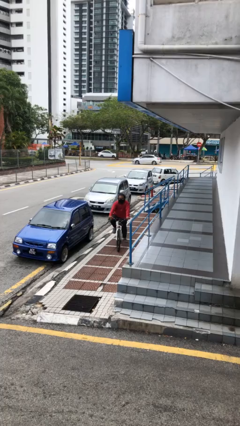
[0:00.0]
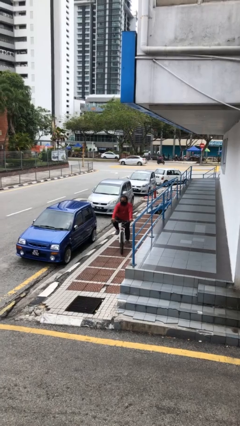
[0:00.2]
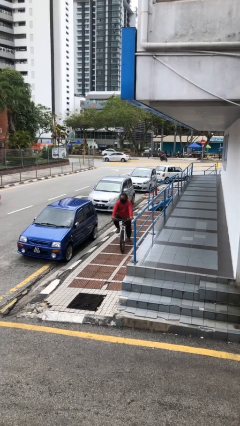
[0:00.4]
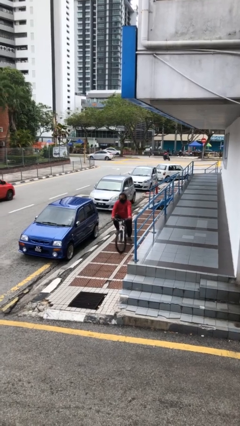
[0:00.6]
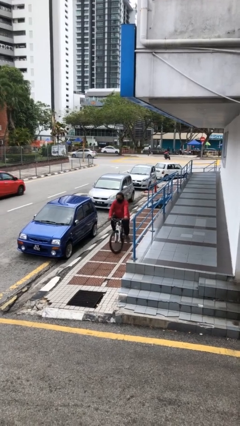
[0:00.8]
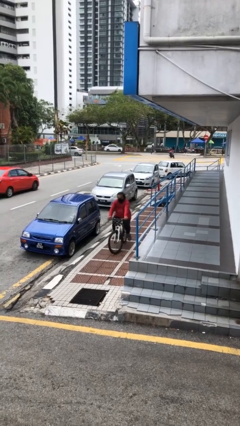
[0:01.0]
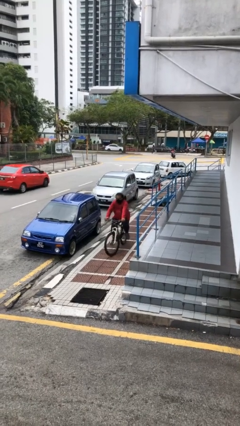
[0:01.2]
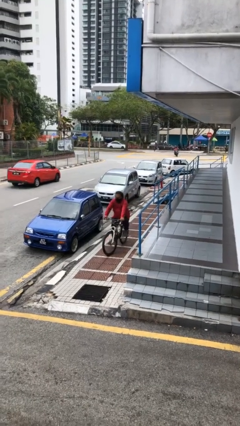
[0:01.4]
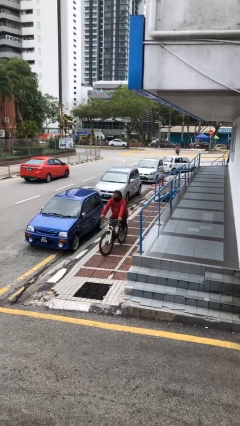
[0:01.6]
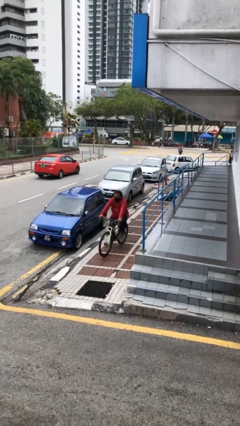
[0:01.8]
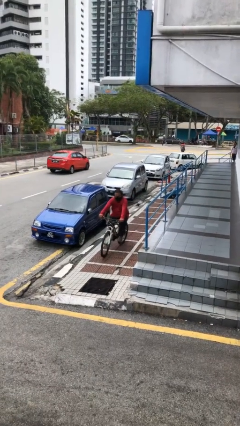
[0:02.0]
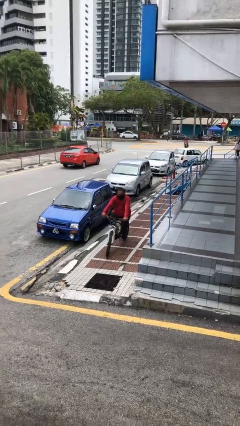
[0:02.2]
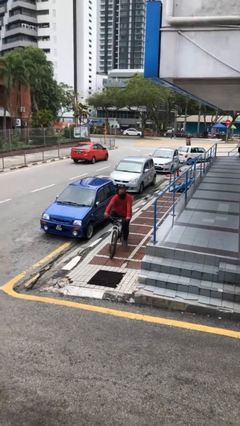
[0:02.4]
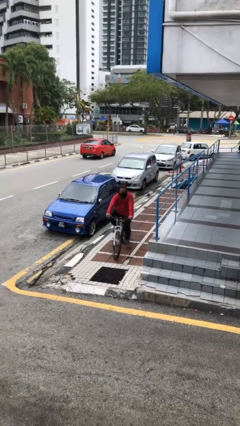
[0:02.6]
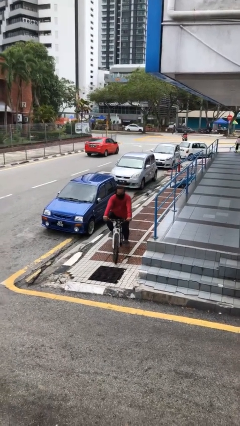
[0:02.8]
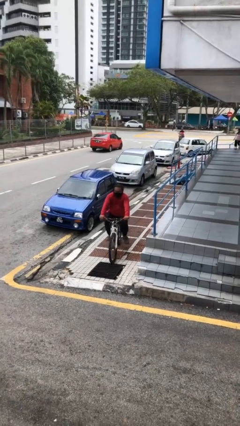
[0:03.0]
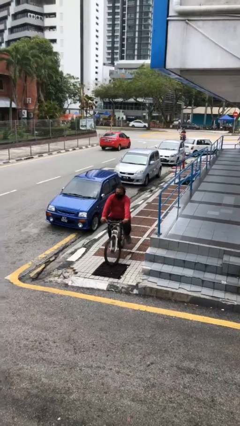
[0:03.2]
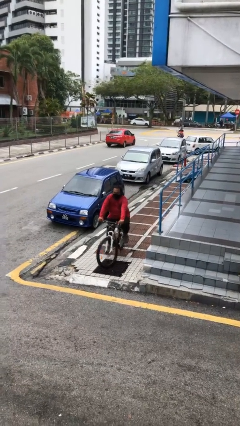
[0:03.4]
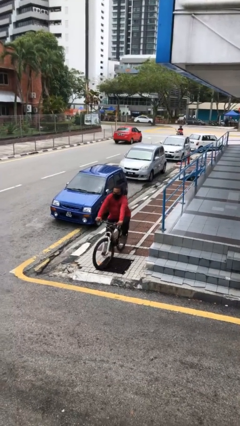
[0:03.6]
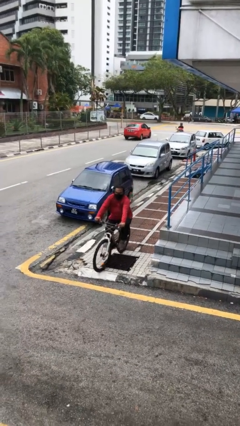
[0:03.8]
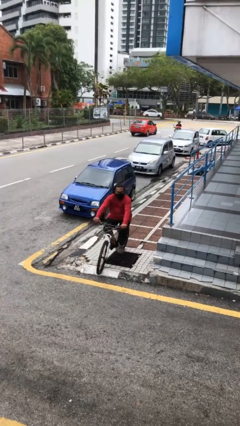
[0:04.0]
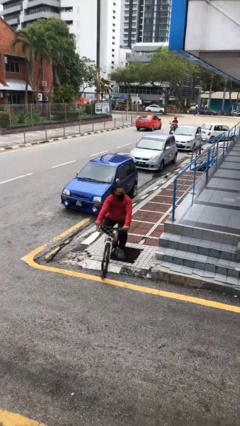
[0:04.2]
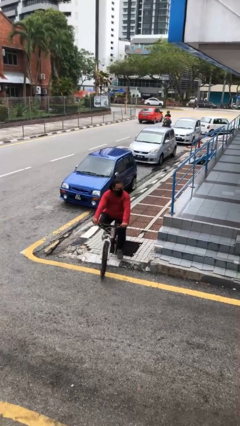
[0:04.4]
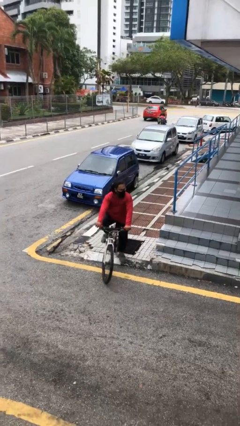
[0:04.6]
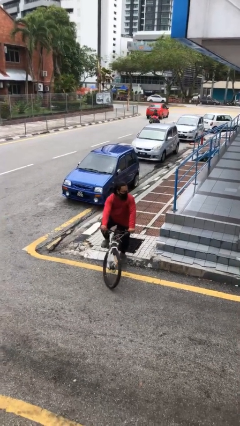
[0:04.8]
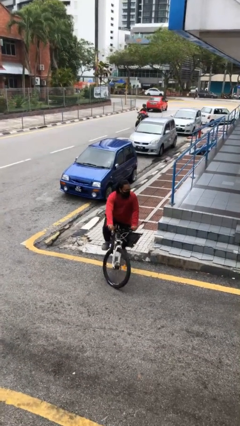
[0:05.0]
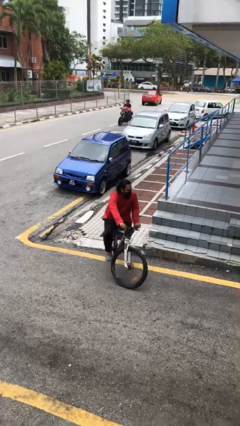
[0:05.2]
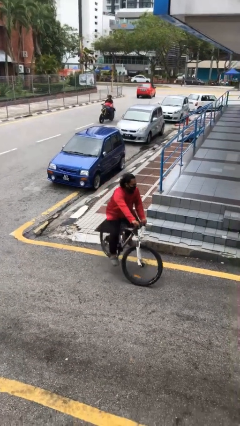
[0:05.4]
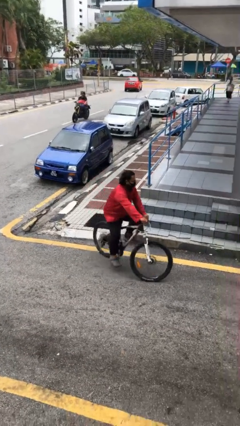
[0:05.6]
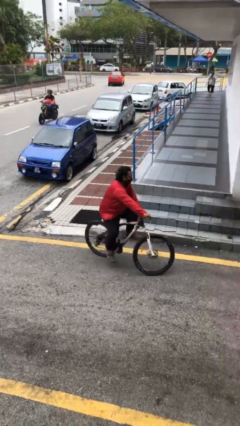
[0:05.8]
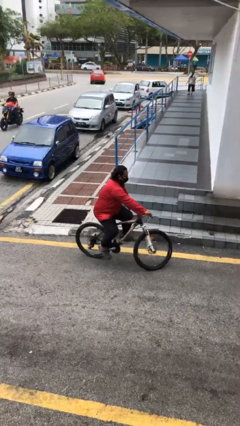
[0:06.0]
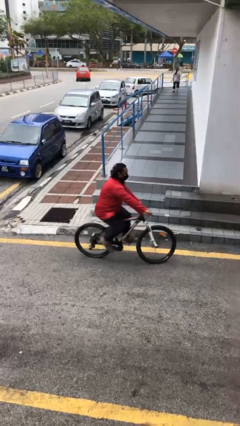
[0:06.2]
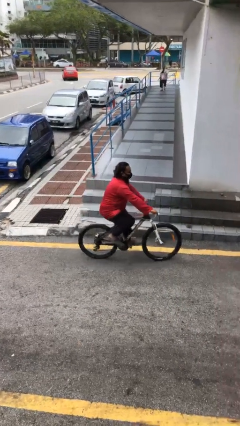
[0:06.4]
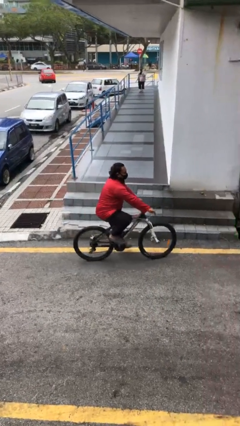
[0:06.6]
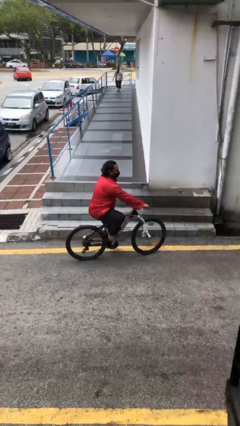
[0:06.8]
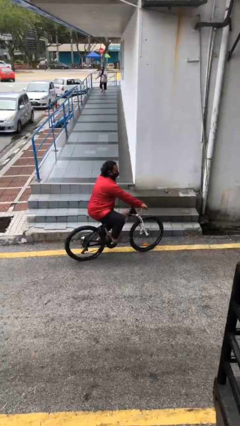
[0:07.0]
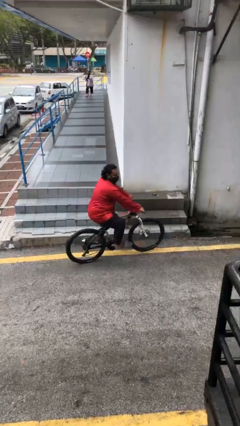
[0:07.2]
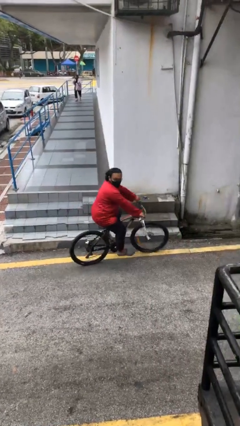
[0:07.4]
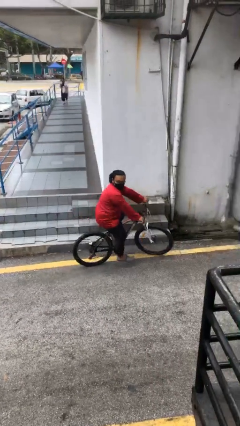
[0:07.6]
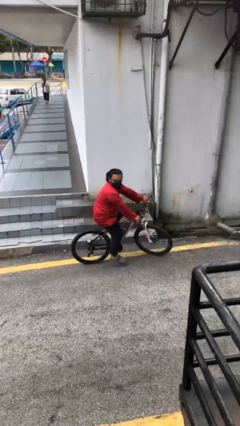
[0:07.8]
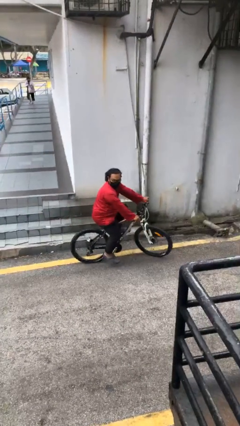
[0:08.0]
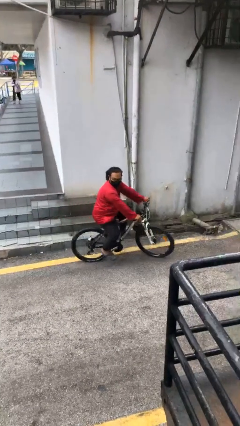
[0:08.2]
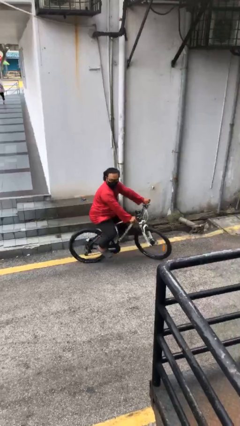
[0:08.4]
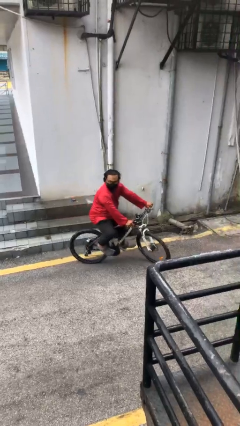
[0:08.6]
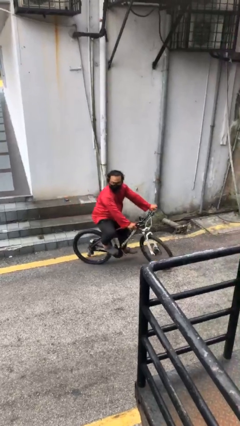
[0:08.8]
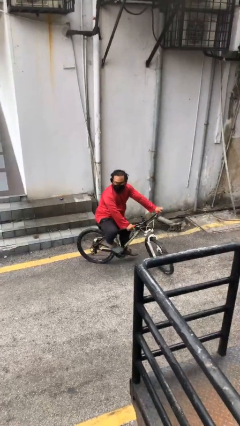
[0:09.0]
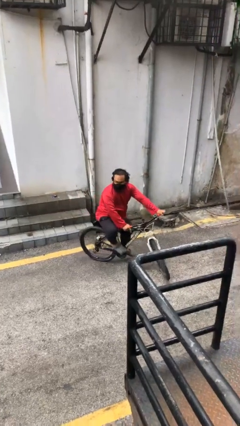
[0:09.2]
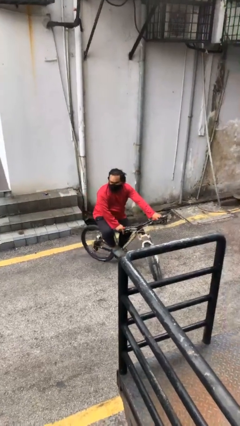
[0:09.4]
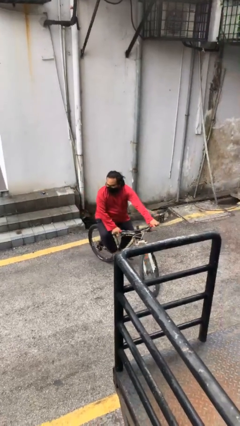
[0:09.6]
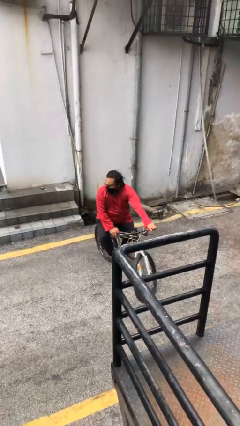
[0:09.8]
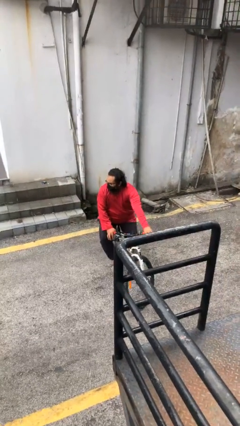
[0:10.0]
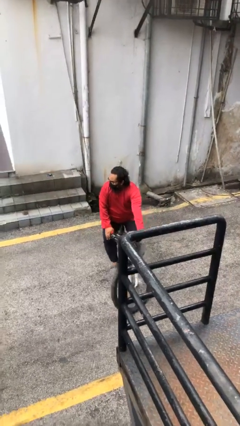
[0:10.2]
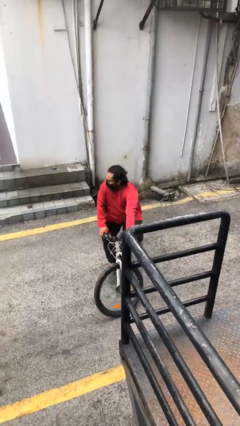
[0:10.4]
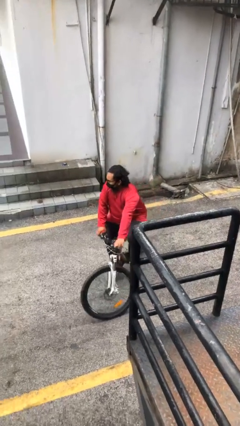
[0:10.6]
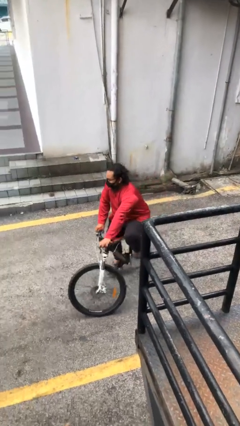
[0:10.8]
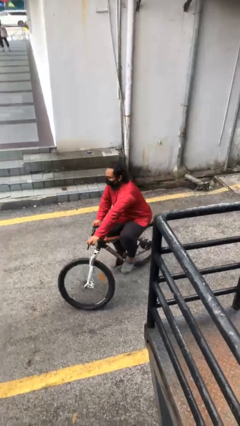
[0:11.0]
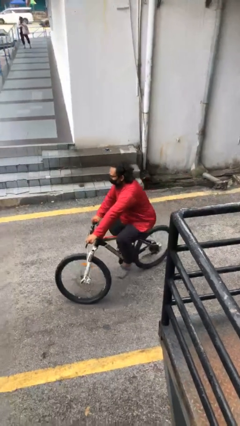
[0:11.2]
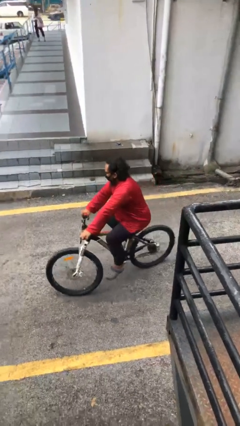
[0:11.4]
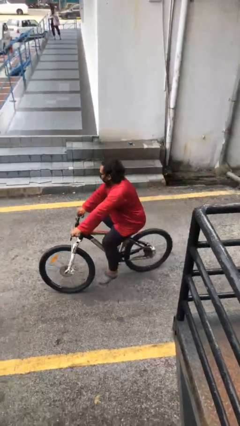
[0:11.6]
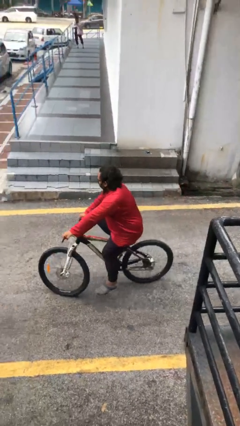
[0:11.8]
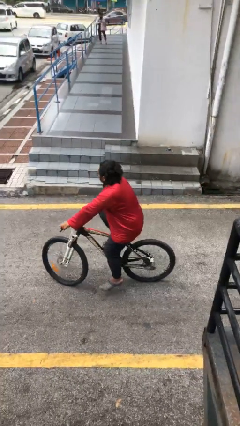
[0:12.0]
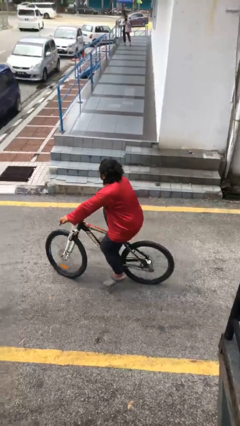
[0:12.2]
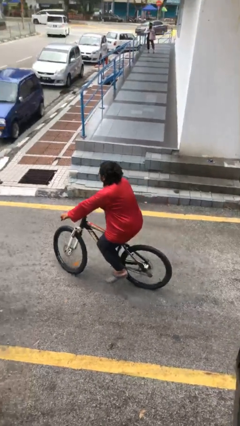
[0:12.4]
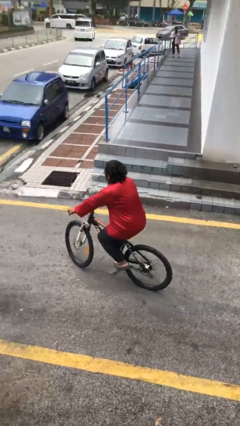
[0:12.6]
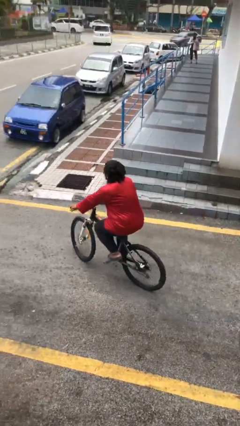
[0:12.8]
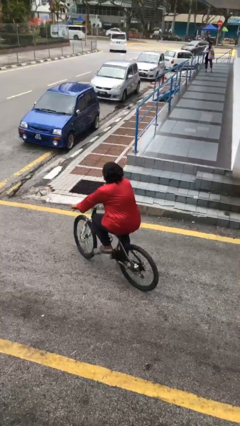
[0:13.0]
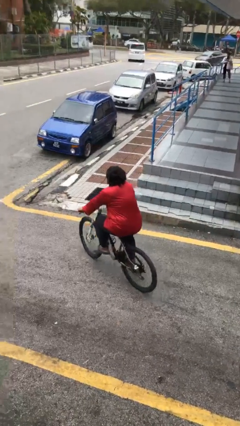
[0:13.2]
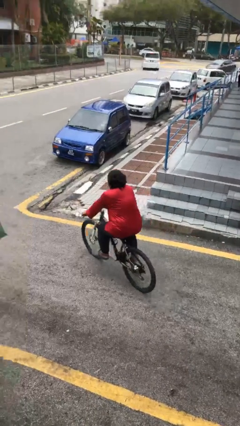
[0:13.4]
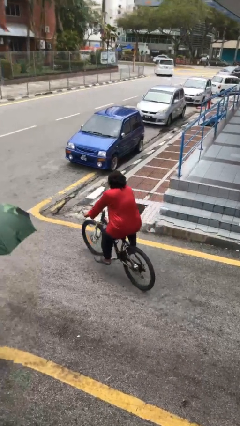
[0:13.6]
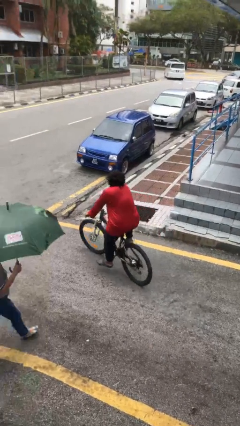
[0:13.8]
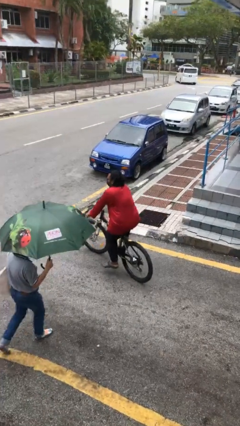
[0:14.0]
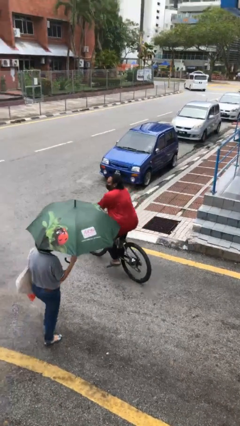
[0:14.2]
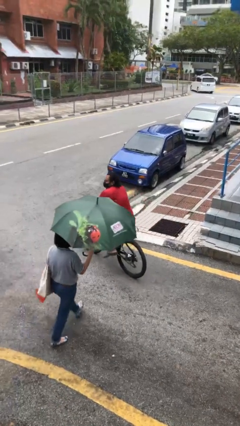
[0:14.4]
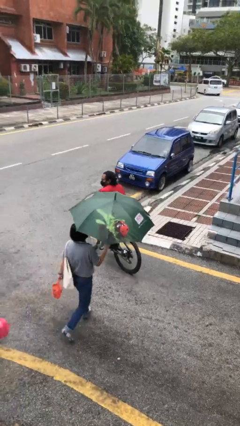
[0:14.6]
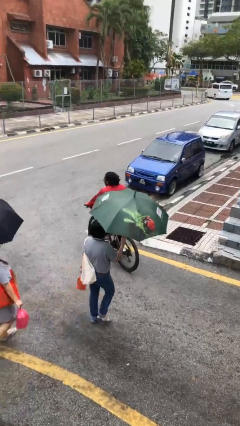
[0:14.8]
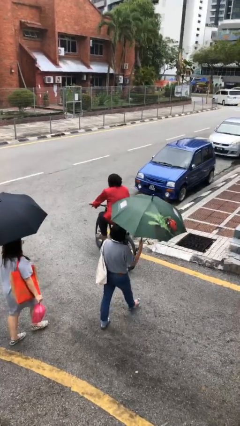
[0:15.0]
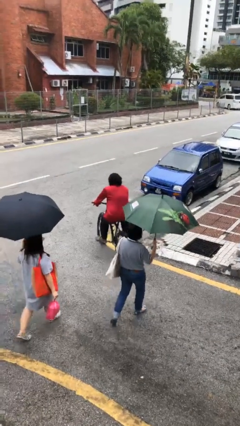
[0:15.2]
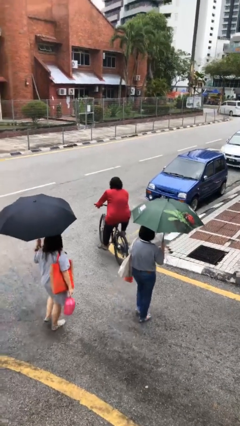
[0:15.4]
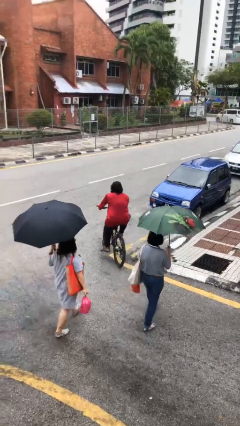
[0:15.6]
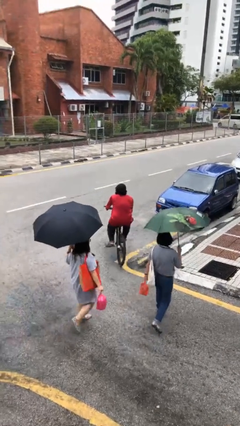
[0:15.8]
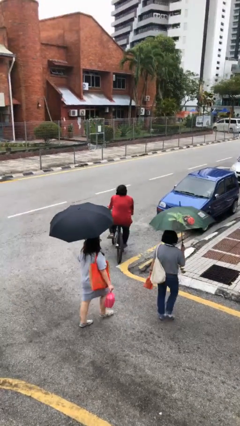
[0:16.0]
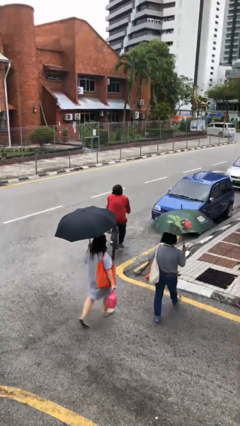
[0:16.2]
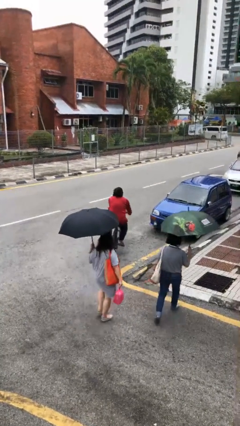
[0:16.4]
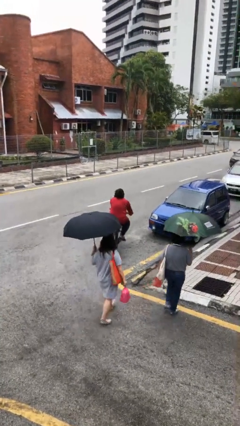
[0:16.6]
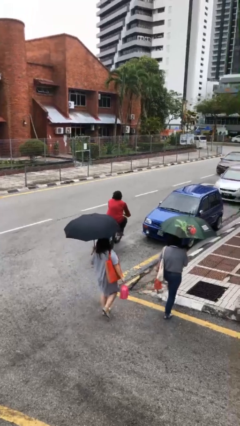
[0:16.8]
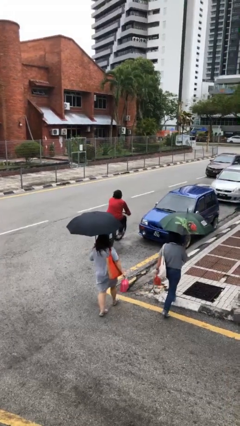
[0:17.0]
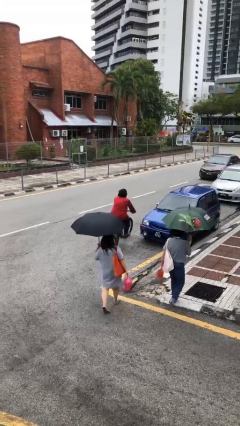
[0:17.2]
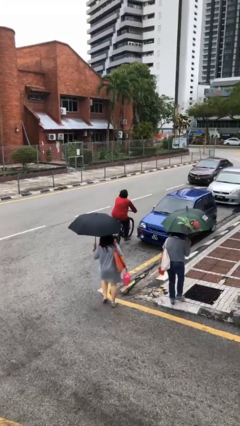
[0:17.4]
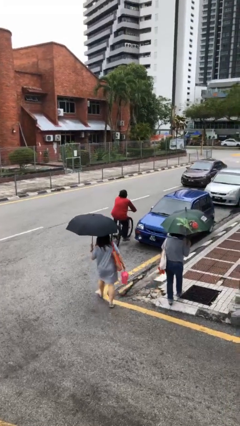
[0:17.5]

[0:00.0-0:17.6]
person rides bicycle

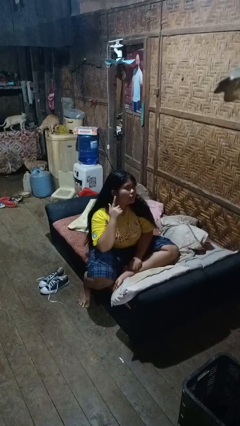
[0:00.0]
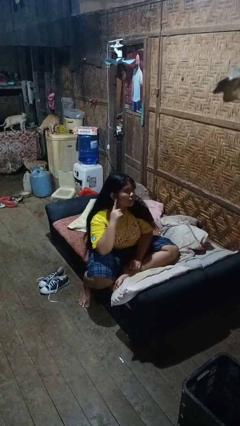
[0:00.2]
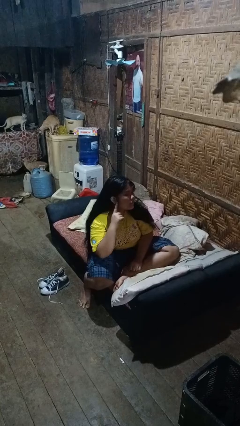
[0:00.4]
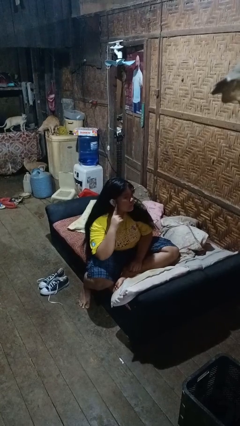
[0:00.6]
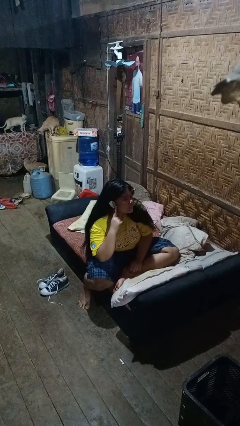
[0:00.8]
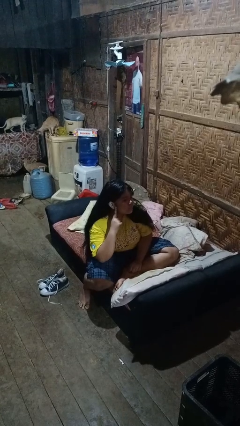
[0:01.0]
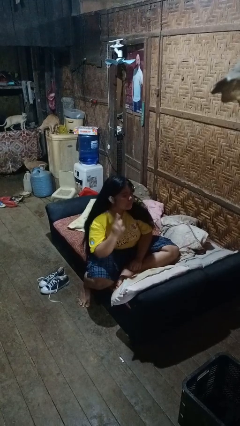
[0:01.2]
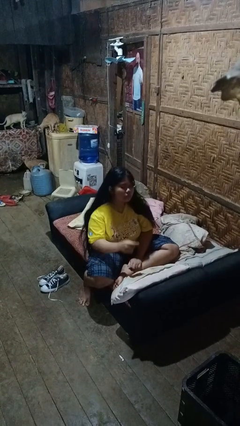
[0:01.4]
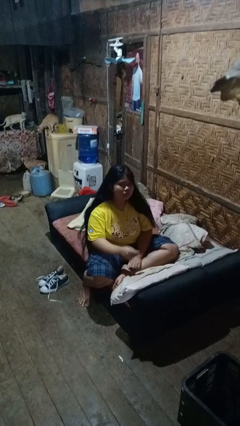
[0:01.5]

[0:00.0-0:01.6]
person gestures listen closely
